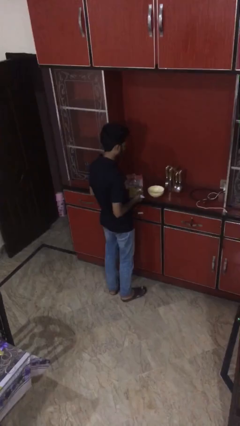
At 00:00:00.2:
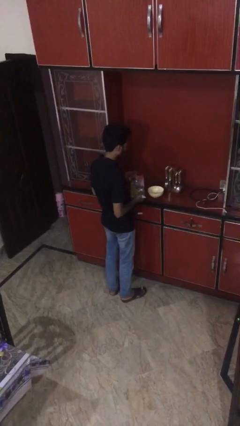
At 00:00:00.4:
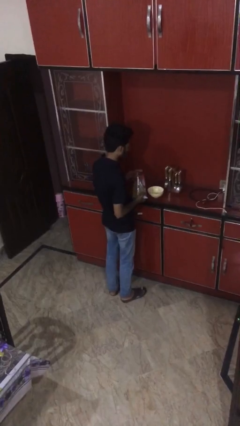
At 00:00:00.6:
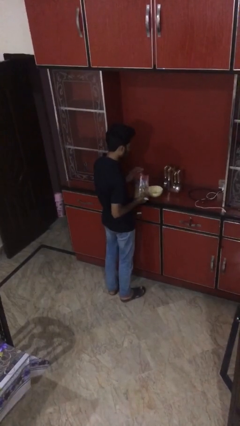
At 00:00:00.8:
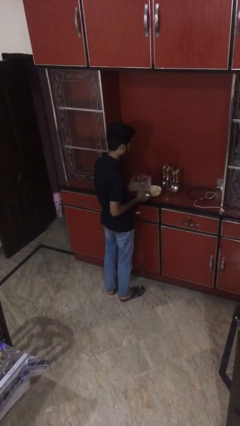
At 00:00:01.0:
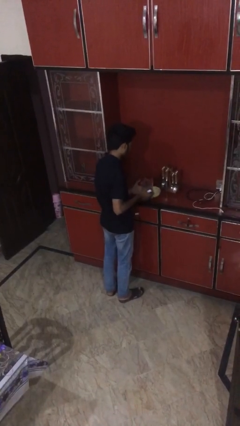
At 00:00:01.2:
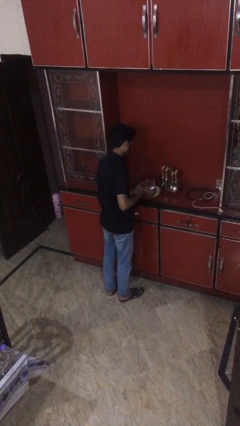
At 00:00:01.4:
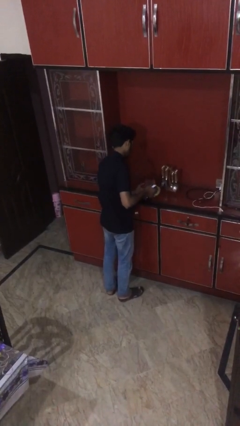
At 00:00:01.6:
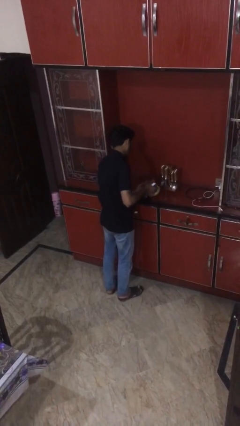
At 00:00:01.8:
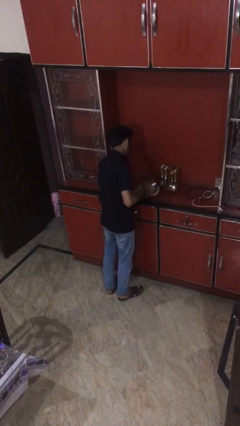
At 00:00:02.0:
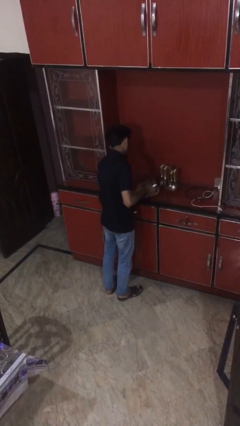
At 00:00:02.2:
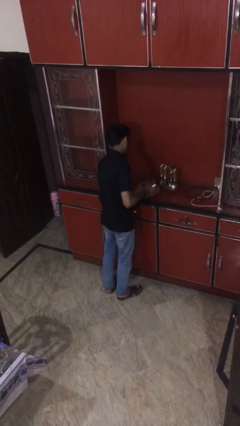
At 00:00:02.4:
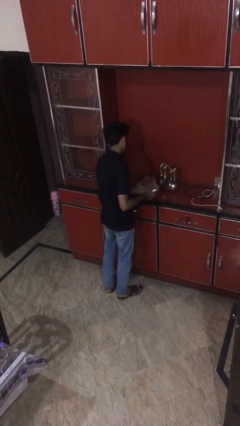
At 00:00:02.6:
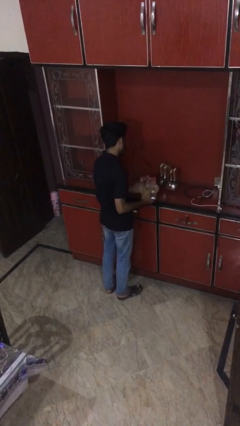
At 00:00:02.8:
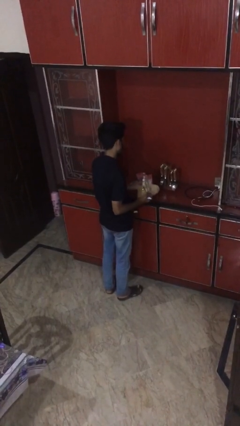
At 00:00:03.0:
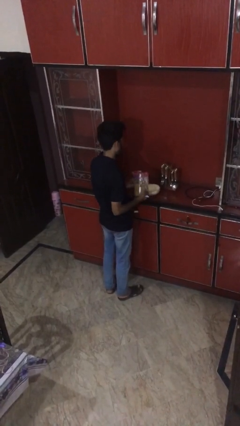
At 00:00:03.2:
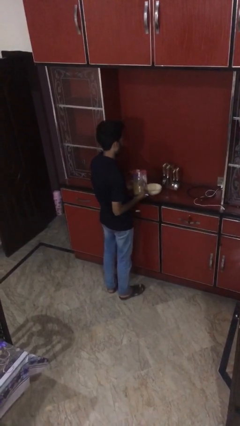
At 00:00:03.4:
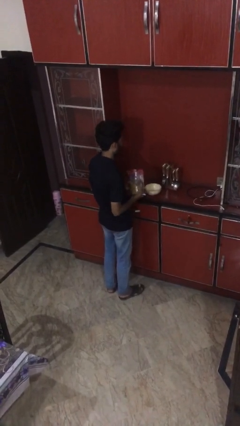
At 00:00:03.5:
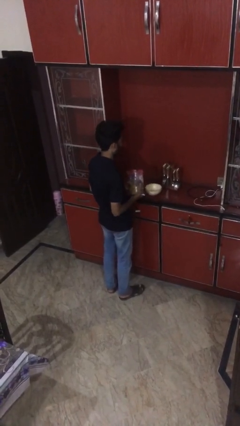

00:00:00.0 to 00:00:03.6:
person pours into bowl

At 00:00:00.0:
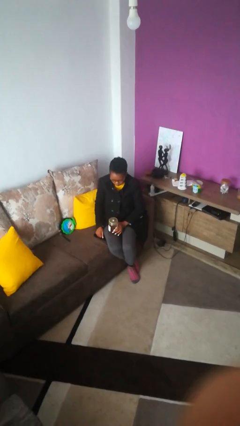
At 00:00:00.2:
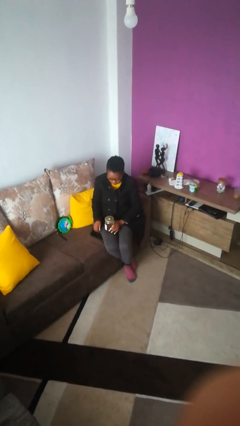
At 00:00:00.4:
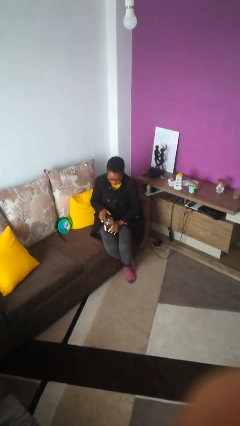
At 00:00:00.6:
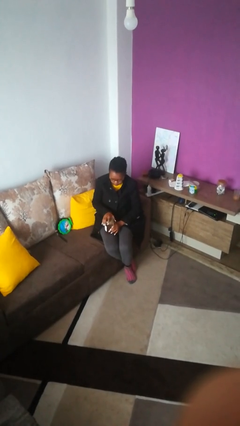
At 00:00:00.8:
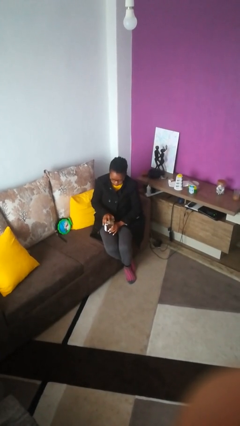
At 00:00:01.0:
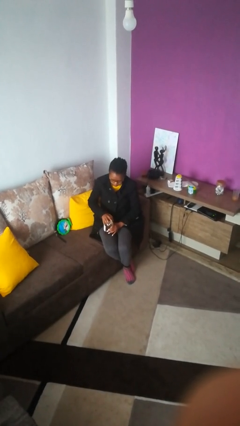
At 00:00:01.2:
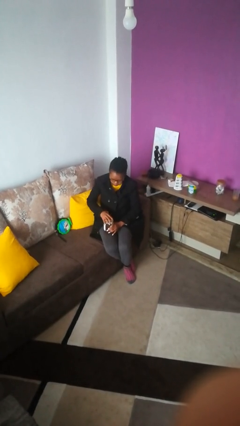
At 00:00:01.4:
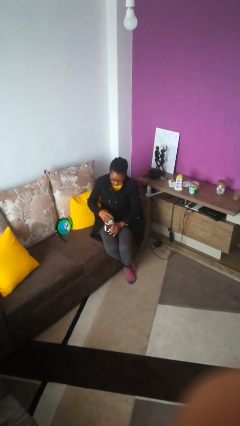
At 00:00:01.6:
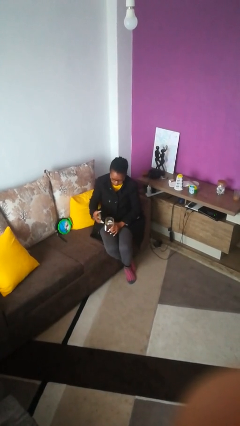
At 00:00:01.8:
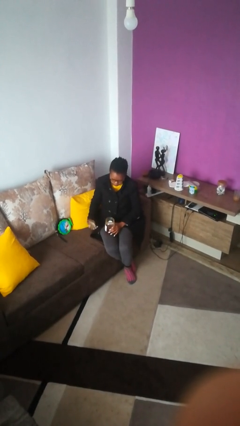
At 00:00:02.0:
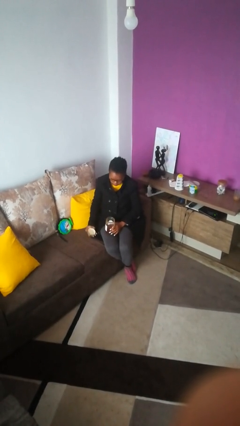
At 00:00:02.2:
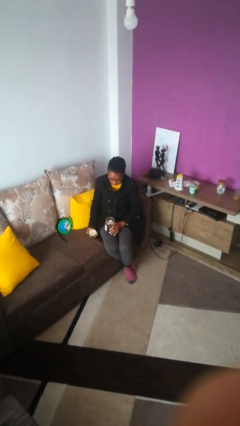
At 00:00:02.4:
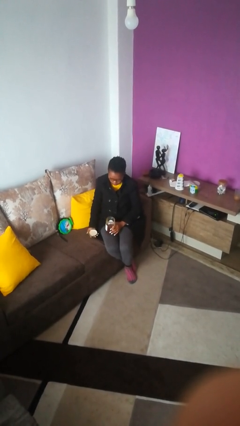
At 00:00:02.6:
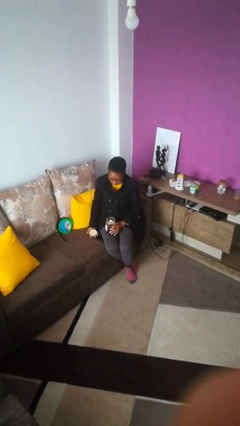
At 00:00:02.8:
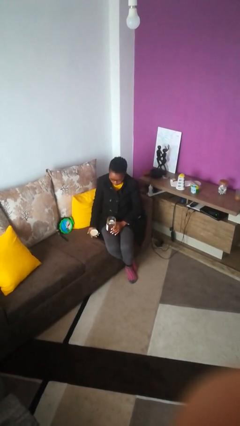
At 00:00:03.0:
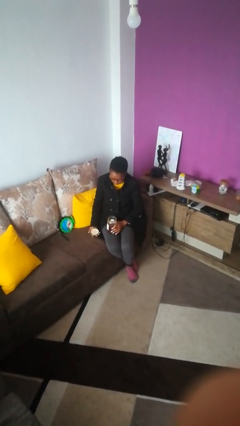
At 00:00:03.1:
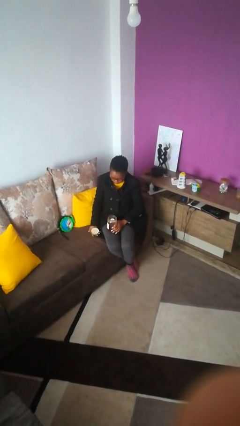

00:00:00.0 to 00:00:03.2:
person opens jar

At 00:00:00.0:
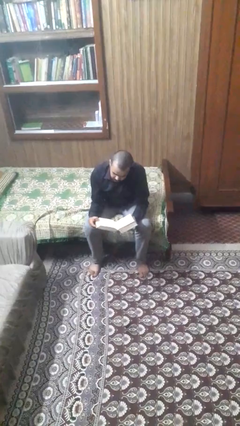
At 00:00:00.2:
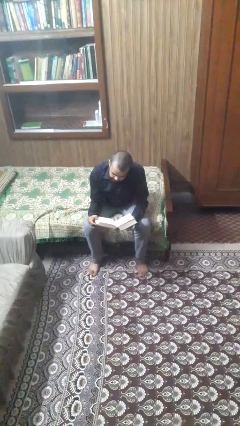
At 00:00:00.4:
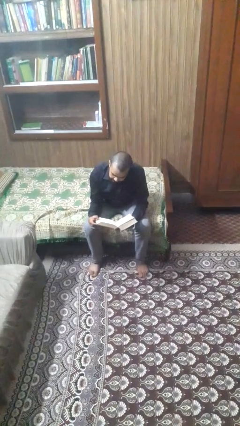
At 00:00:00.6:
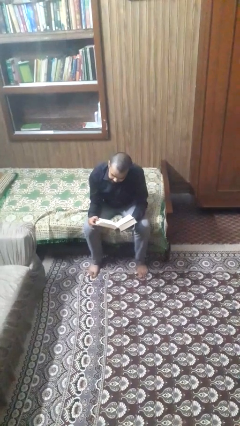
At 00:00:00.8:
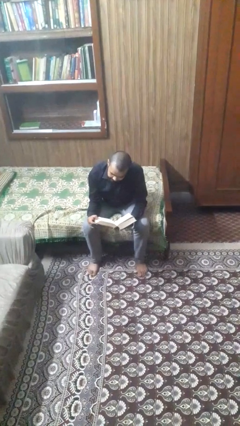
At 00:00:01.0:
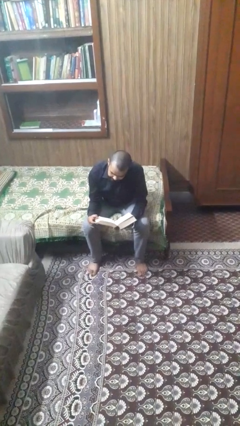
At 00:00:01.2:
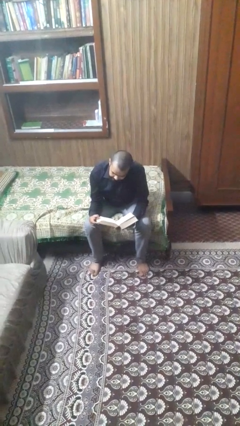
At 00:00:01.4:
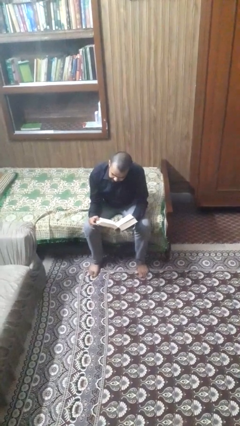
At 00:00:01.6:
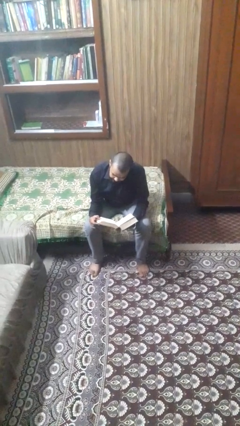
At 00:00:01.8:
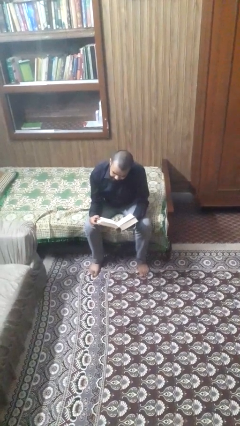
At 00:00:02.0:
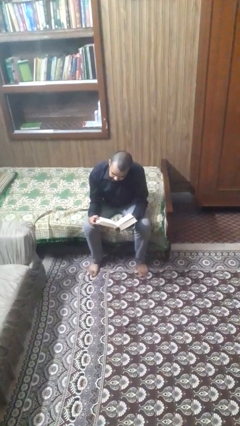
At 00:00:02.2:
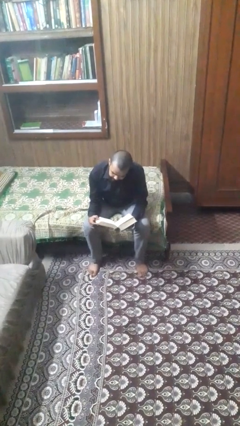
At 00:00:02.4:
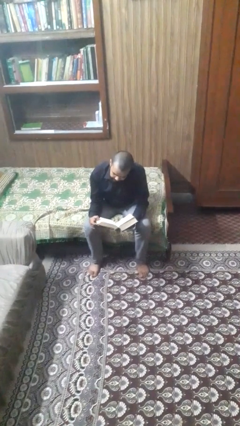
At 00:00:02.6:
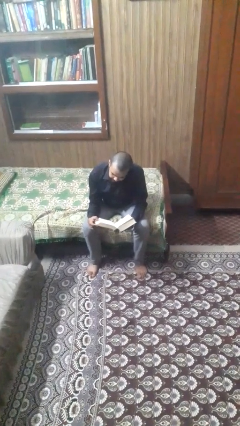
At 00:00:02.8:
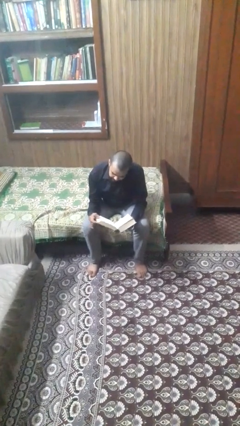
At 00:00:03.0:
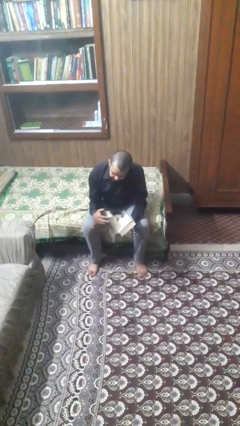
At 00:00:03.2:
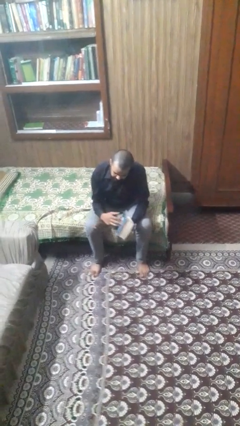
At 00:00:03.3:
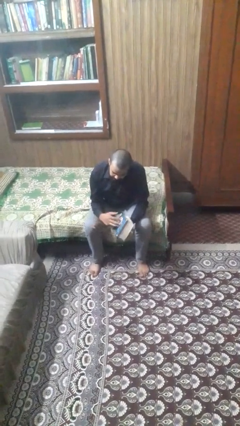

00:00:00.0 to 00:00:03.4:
person reads book

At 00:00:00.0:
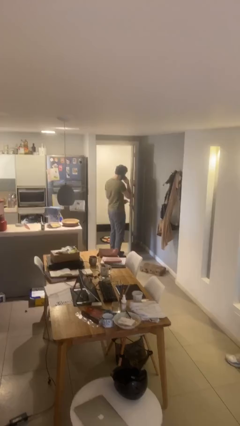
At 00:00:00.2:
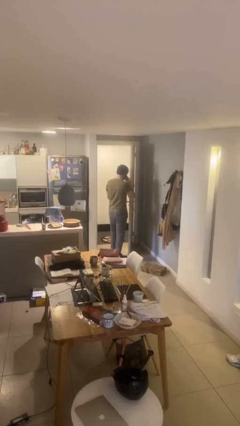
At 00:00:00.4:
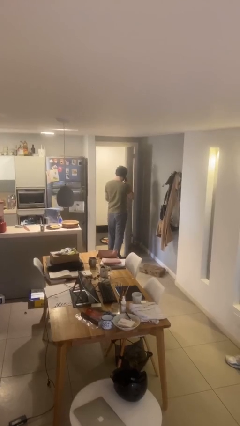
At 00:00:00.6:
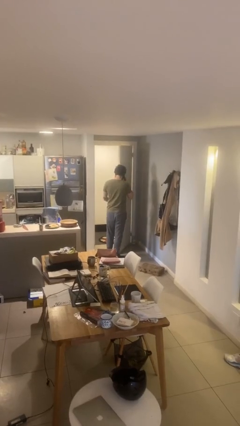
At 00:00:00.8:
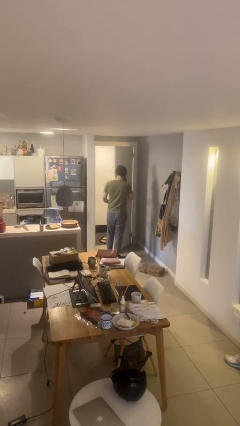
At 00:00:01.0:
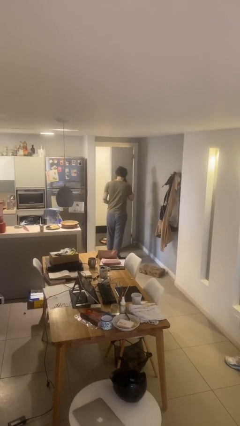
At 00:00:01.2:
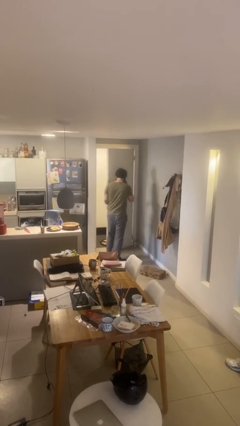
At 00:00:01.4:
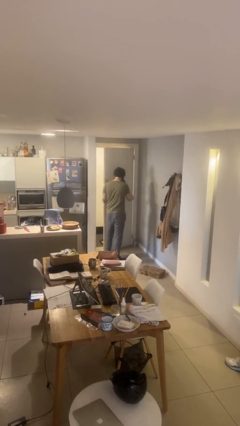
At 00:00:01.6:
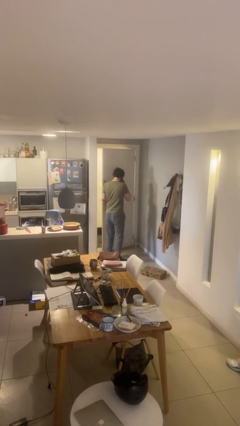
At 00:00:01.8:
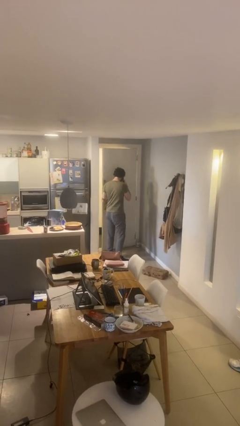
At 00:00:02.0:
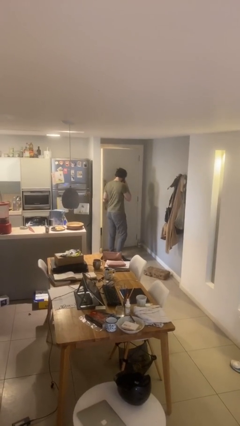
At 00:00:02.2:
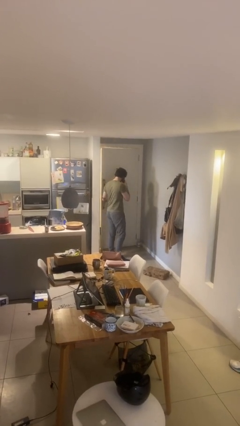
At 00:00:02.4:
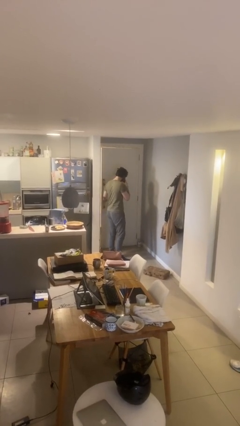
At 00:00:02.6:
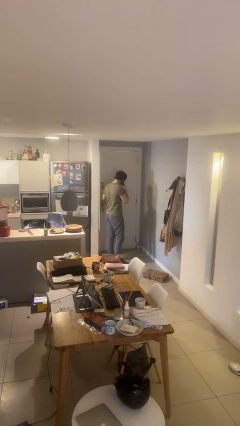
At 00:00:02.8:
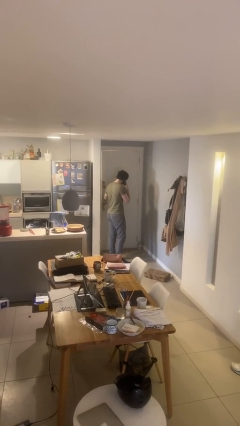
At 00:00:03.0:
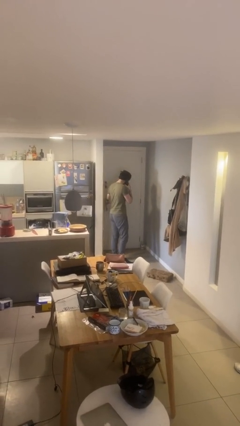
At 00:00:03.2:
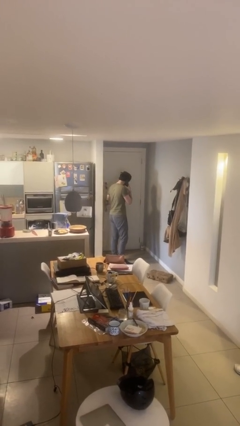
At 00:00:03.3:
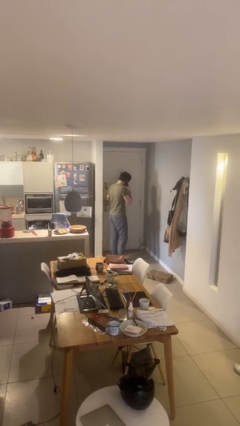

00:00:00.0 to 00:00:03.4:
person closes facility door

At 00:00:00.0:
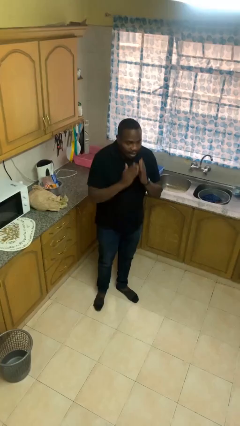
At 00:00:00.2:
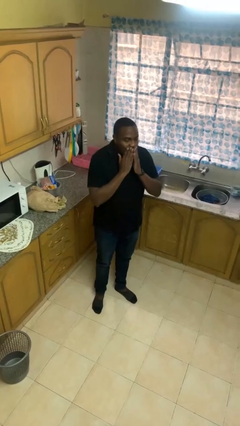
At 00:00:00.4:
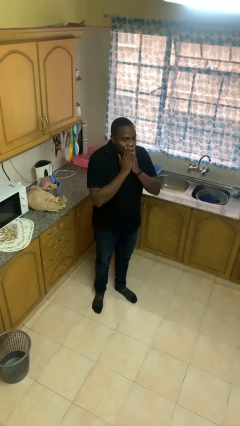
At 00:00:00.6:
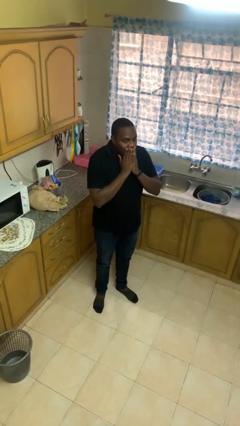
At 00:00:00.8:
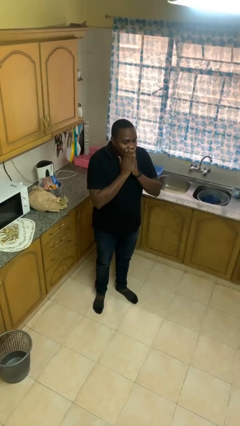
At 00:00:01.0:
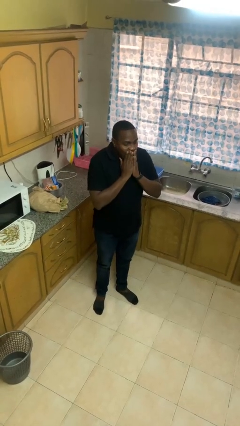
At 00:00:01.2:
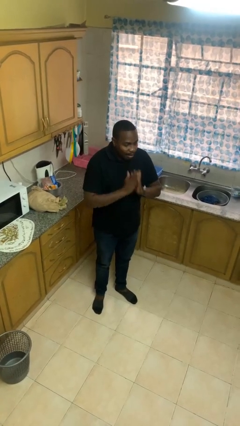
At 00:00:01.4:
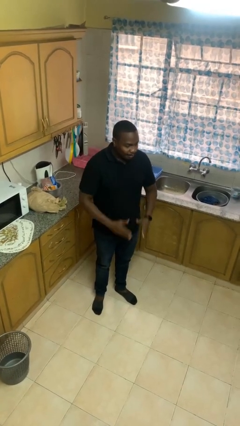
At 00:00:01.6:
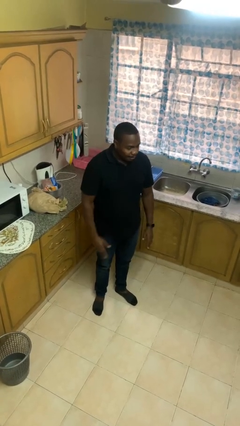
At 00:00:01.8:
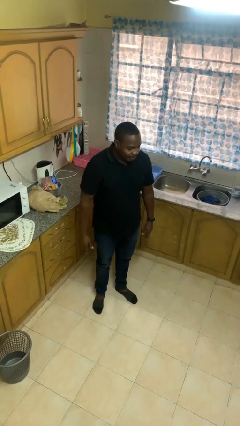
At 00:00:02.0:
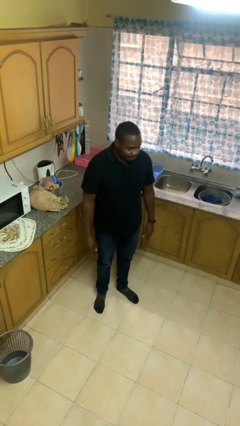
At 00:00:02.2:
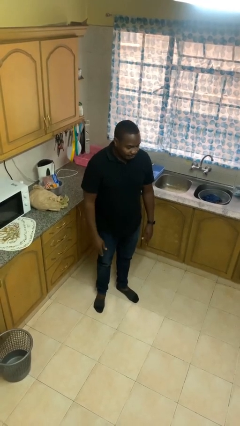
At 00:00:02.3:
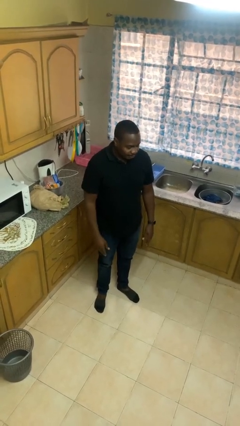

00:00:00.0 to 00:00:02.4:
person yawns

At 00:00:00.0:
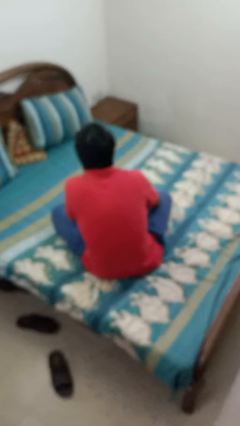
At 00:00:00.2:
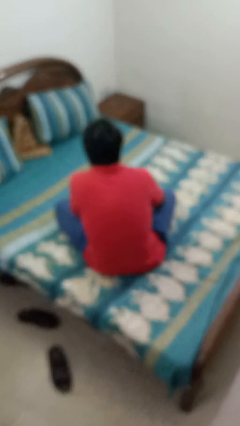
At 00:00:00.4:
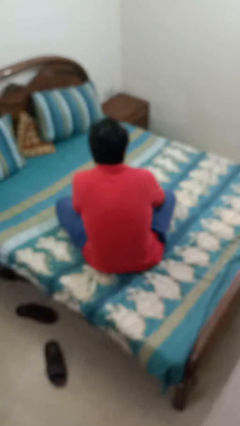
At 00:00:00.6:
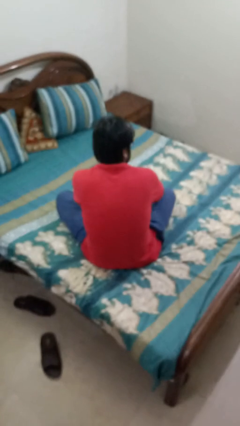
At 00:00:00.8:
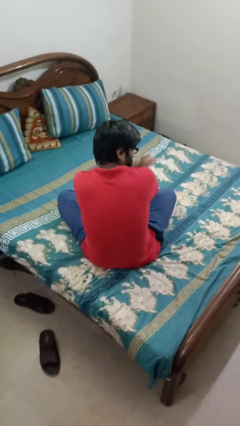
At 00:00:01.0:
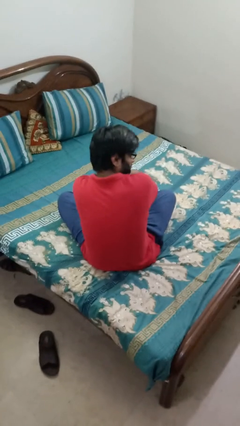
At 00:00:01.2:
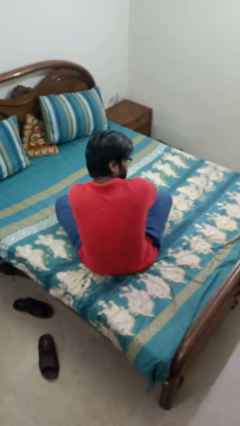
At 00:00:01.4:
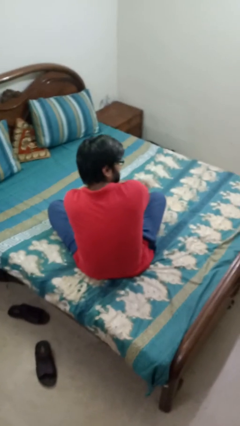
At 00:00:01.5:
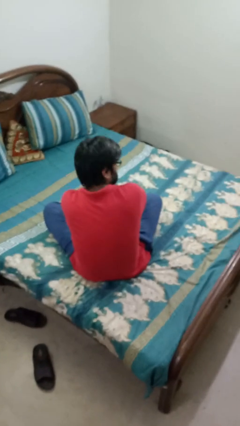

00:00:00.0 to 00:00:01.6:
person swats bug
